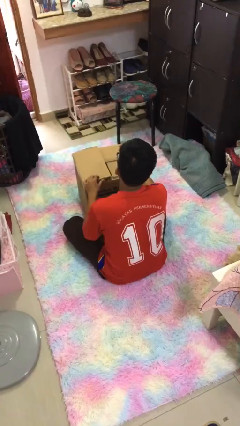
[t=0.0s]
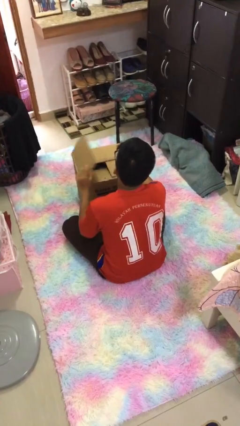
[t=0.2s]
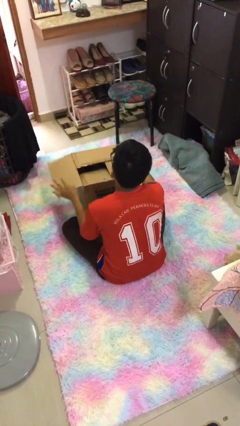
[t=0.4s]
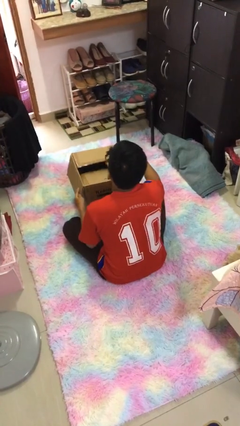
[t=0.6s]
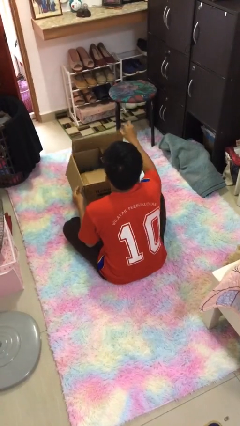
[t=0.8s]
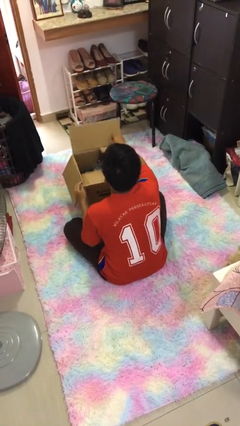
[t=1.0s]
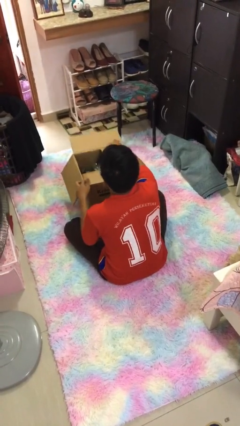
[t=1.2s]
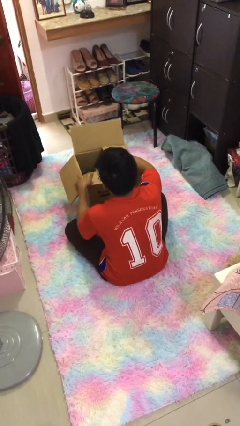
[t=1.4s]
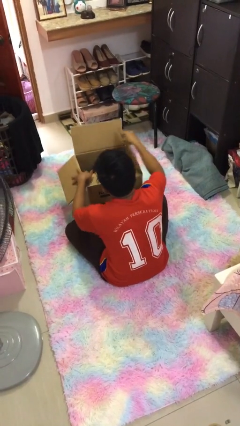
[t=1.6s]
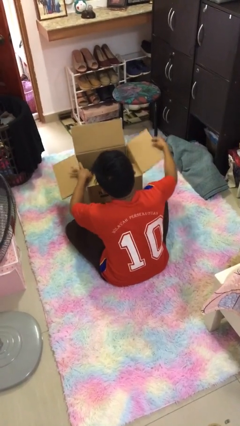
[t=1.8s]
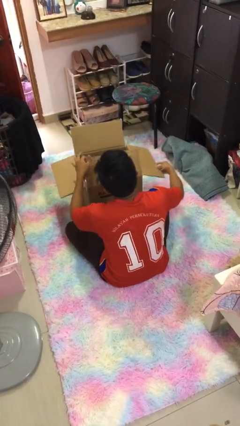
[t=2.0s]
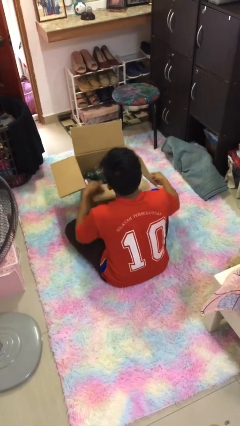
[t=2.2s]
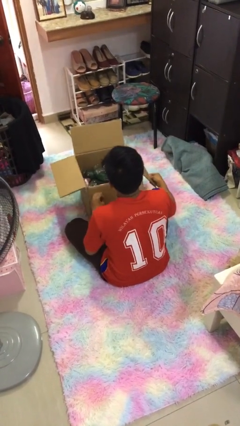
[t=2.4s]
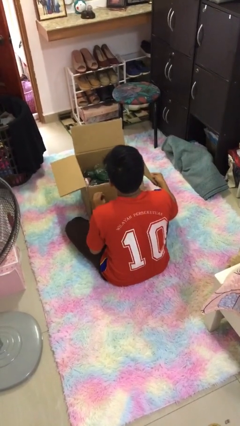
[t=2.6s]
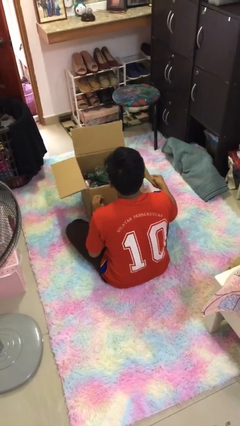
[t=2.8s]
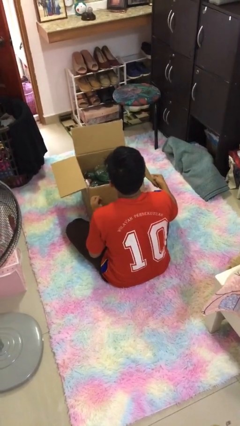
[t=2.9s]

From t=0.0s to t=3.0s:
person opens box

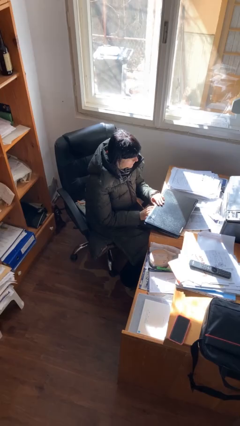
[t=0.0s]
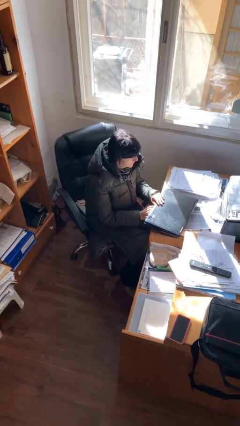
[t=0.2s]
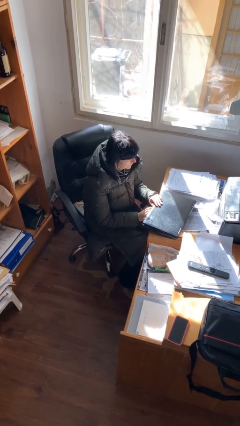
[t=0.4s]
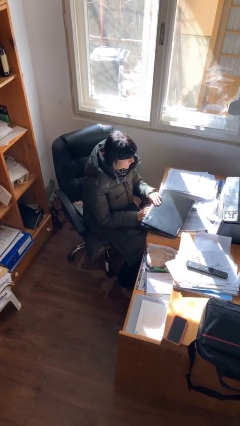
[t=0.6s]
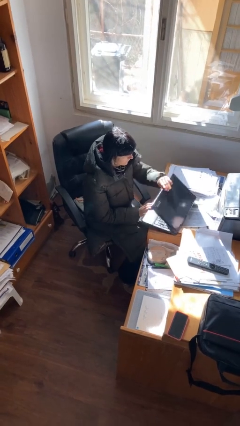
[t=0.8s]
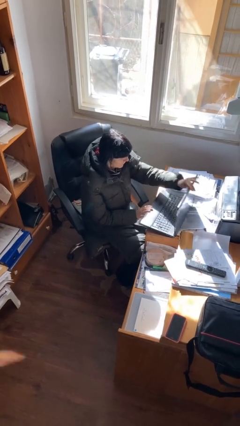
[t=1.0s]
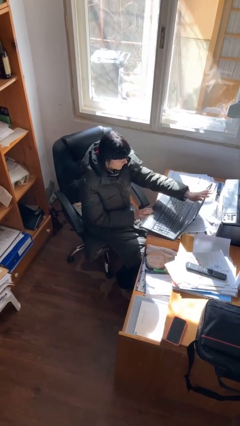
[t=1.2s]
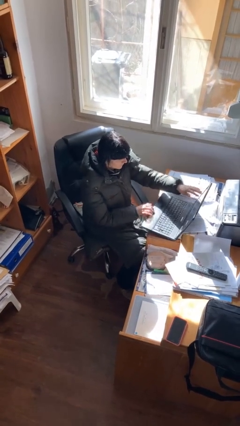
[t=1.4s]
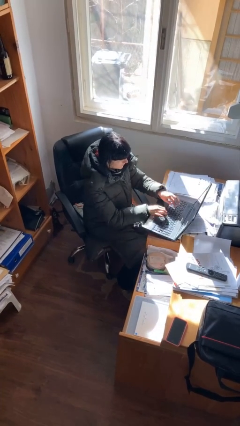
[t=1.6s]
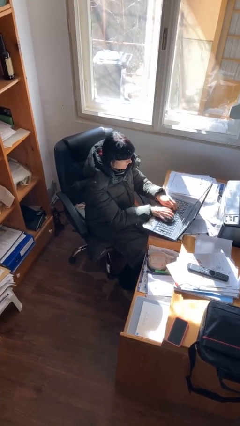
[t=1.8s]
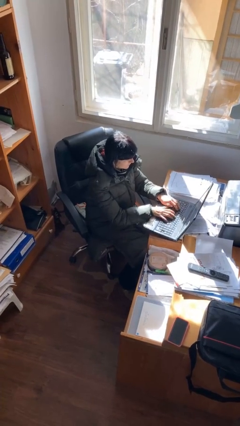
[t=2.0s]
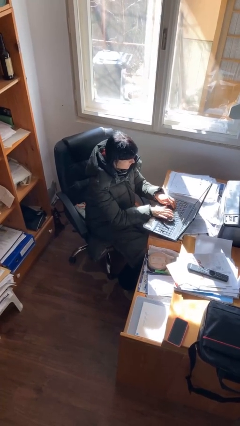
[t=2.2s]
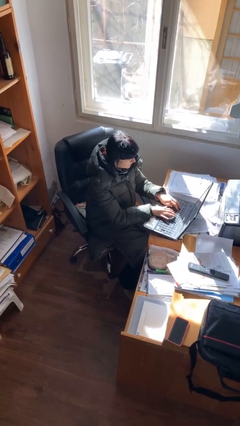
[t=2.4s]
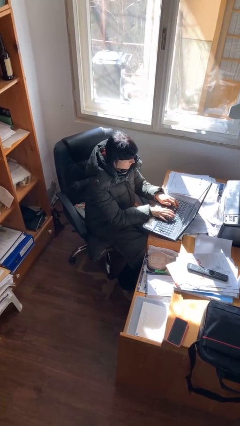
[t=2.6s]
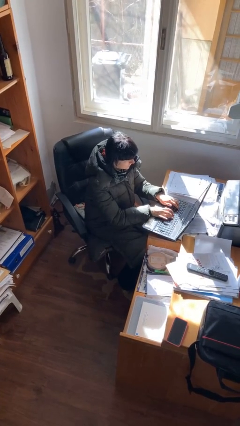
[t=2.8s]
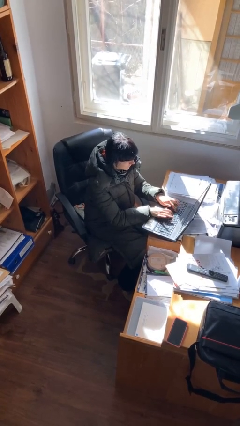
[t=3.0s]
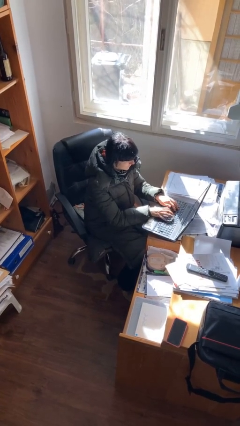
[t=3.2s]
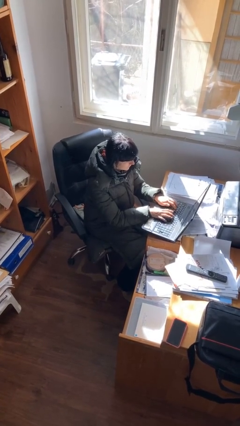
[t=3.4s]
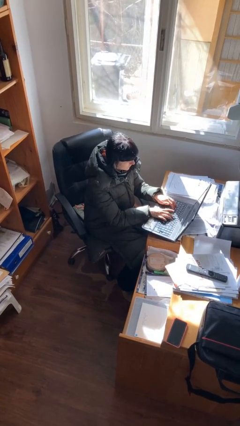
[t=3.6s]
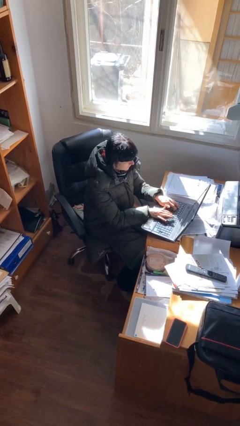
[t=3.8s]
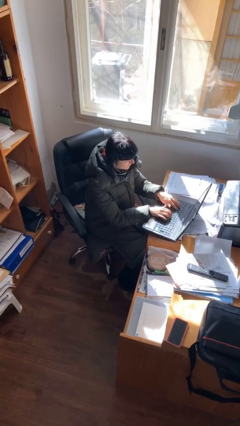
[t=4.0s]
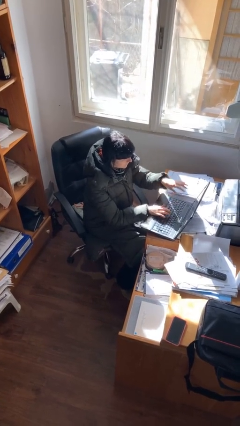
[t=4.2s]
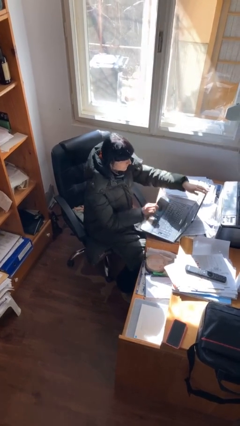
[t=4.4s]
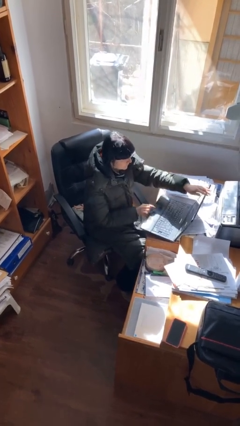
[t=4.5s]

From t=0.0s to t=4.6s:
person interacts with laptop

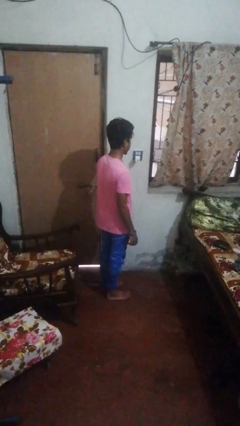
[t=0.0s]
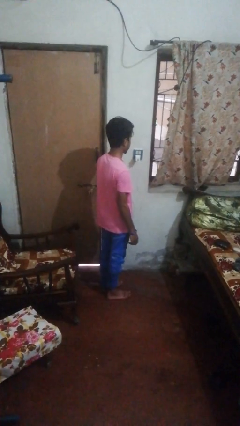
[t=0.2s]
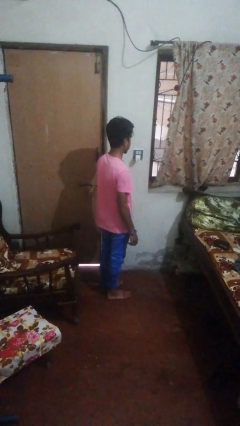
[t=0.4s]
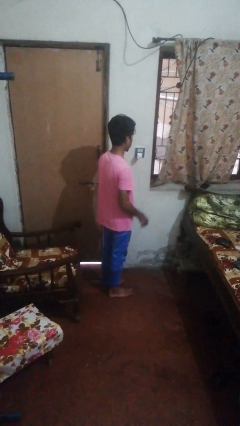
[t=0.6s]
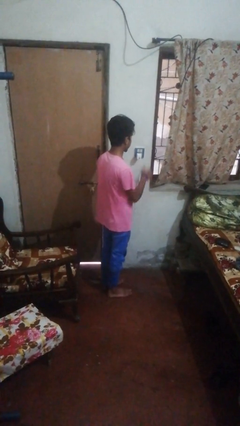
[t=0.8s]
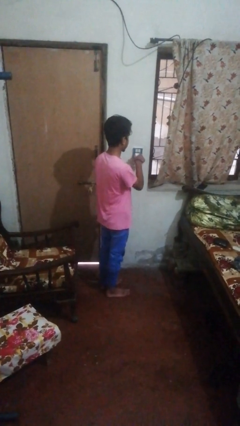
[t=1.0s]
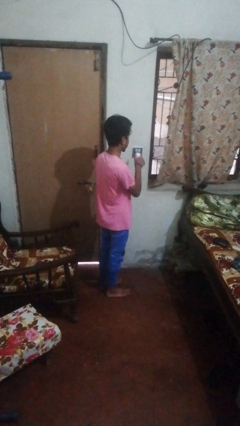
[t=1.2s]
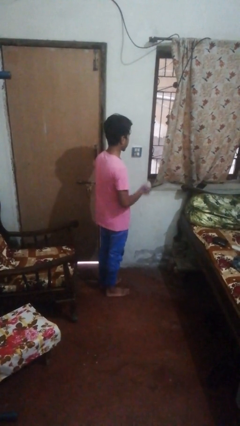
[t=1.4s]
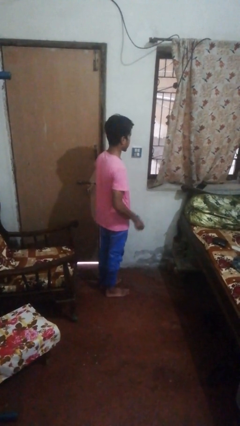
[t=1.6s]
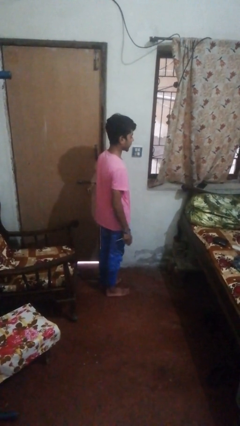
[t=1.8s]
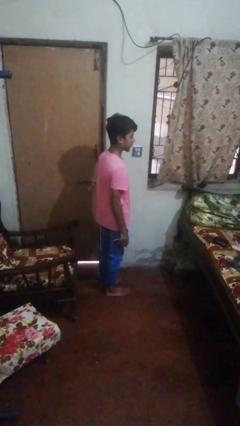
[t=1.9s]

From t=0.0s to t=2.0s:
person unplugs from electrical socket

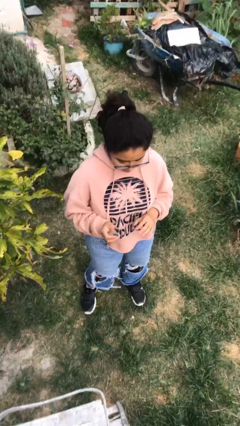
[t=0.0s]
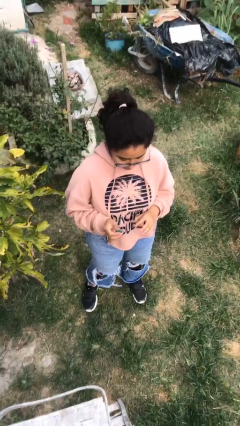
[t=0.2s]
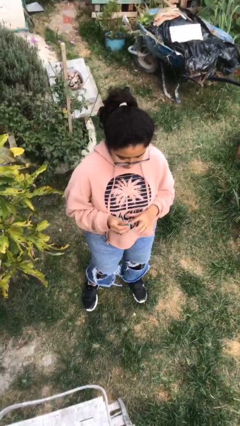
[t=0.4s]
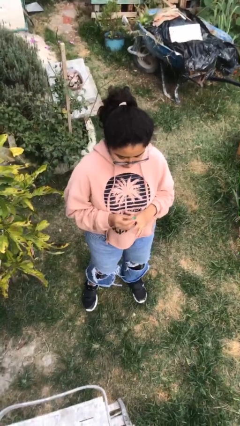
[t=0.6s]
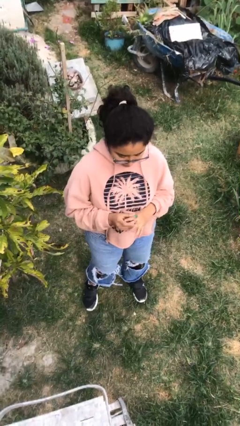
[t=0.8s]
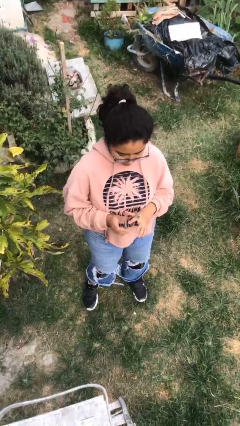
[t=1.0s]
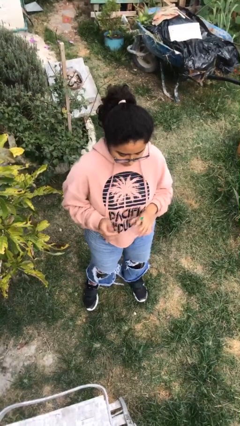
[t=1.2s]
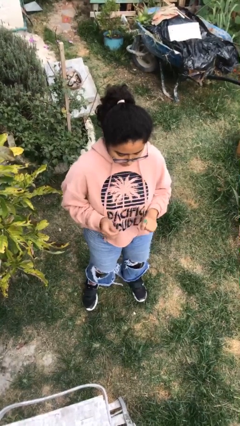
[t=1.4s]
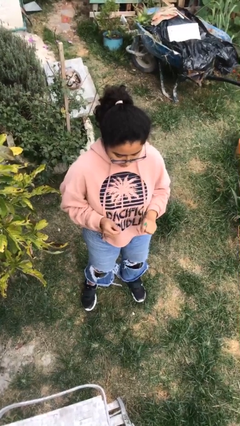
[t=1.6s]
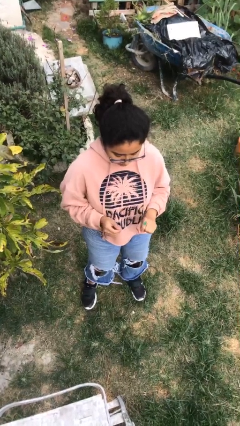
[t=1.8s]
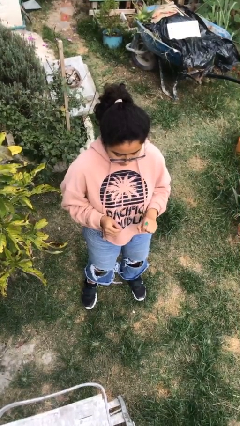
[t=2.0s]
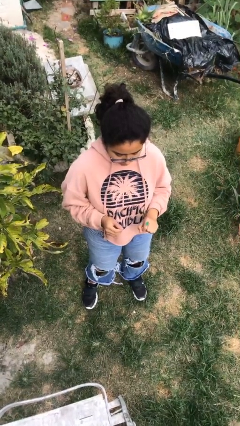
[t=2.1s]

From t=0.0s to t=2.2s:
person puts on ring

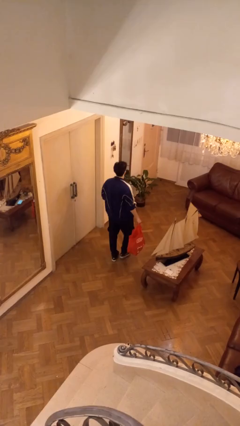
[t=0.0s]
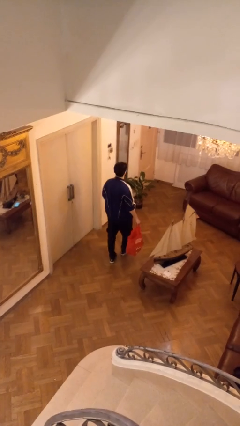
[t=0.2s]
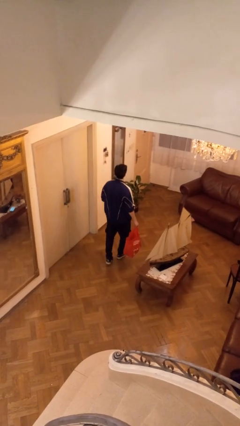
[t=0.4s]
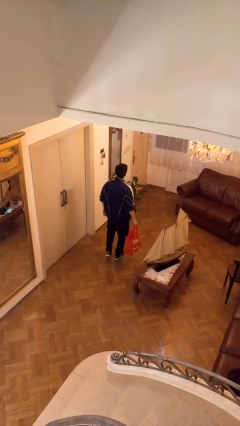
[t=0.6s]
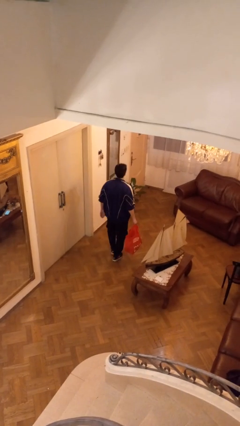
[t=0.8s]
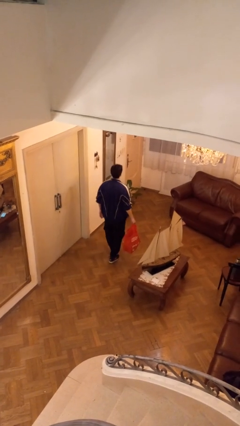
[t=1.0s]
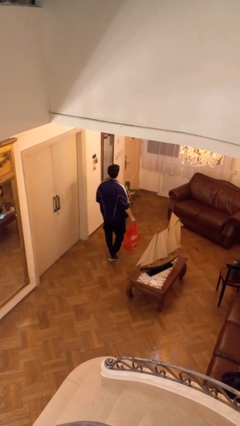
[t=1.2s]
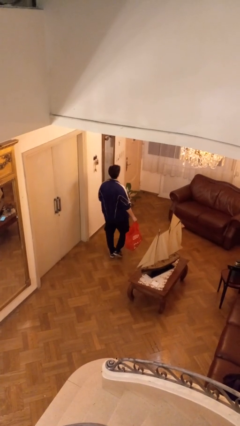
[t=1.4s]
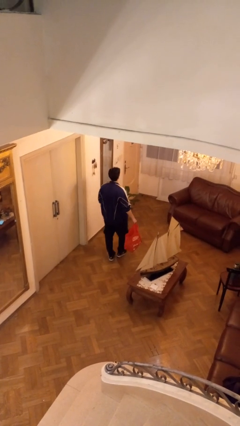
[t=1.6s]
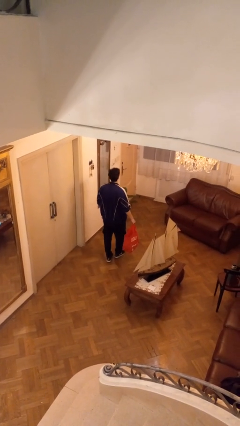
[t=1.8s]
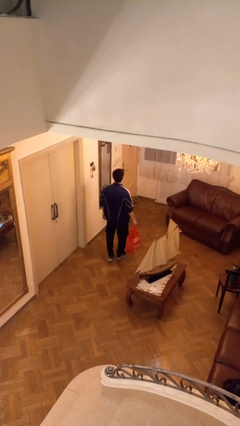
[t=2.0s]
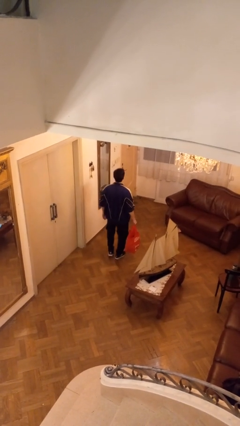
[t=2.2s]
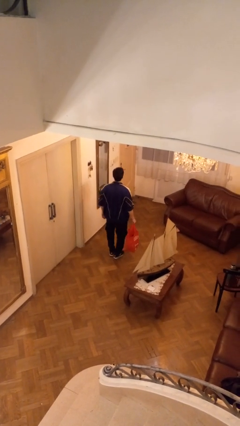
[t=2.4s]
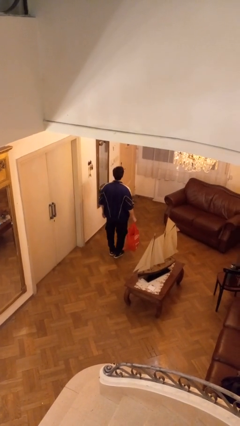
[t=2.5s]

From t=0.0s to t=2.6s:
person carries groceries

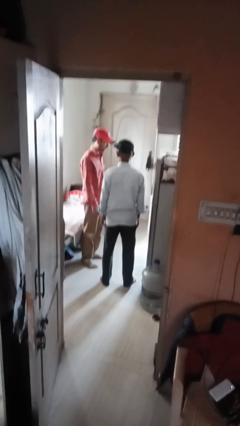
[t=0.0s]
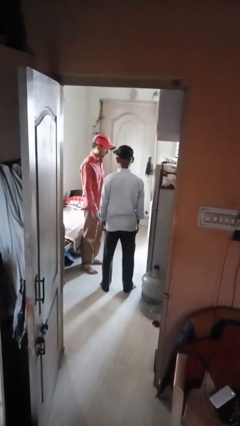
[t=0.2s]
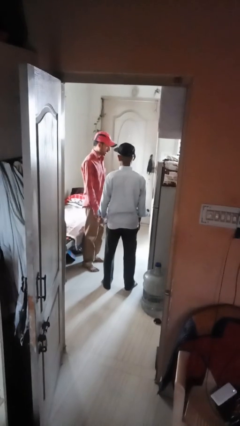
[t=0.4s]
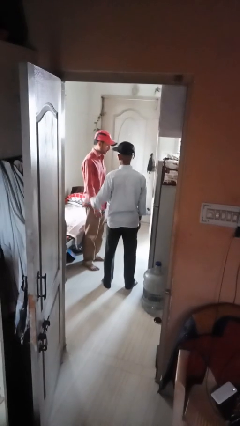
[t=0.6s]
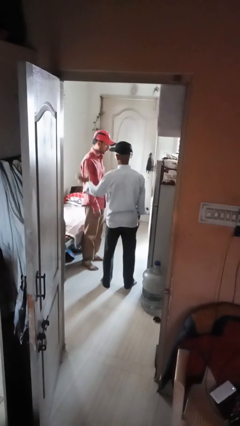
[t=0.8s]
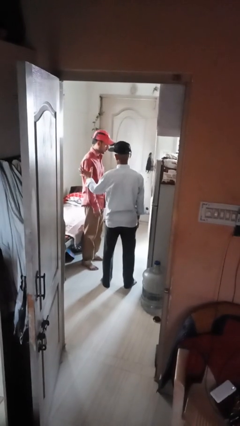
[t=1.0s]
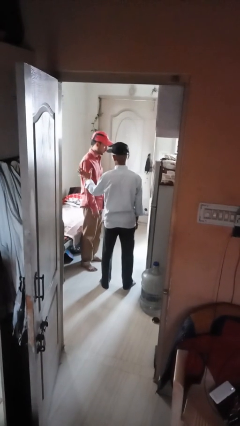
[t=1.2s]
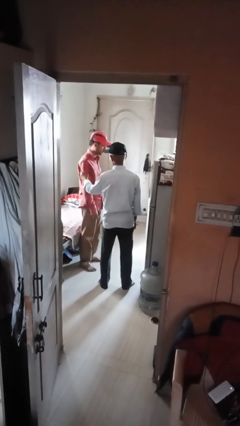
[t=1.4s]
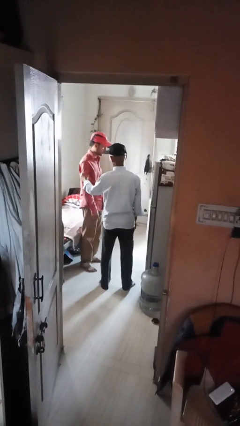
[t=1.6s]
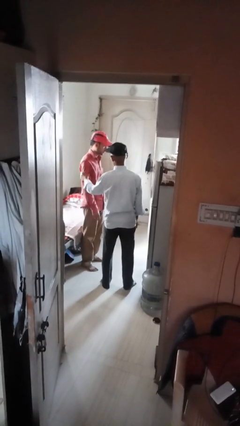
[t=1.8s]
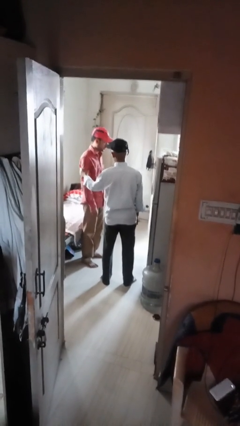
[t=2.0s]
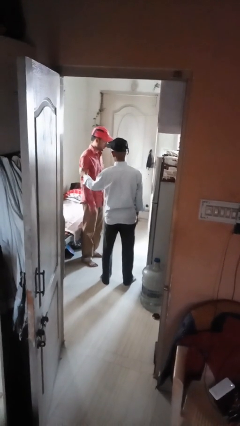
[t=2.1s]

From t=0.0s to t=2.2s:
person grabs person by bicep

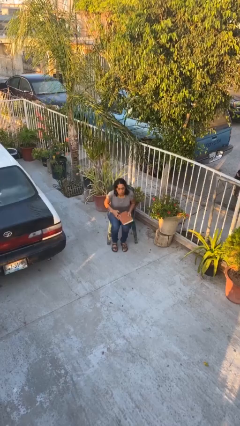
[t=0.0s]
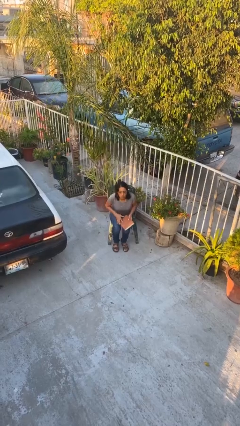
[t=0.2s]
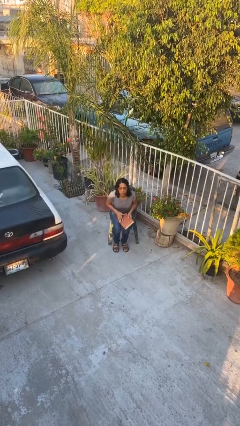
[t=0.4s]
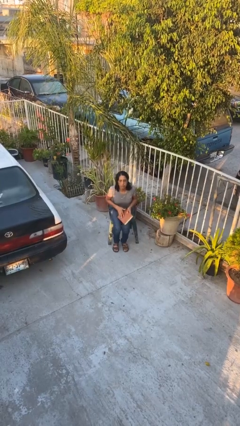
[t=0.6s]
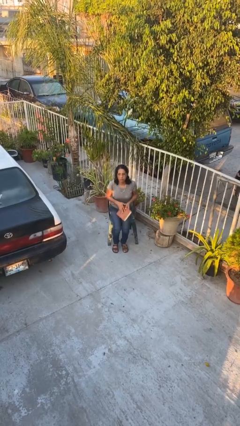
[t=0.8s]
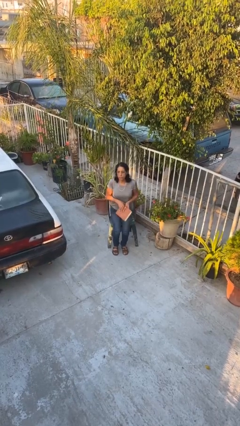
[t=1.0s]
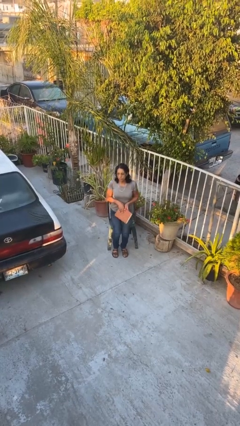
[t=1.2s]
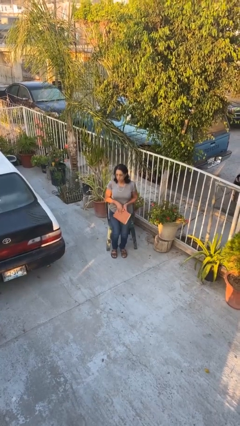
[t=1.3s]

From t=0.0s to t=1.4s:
person stands up
